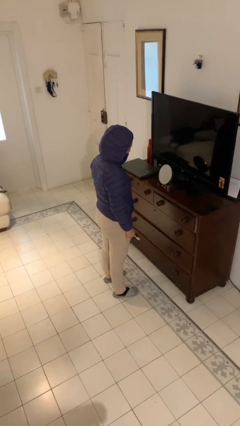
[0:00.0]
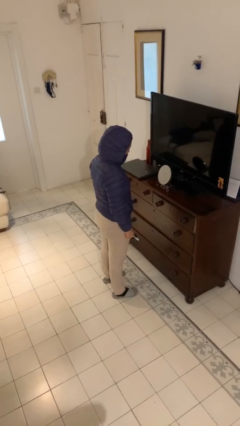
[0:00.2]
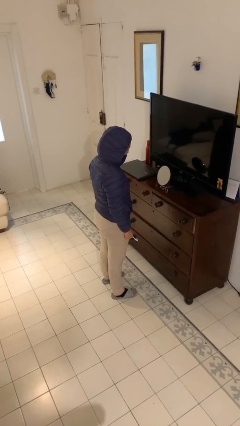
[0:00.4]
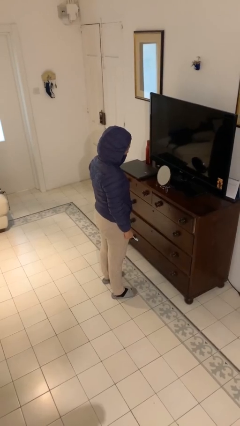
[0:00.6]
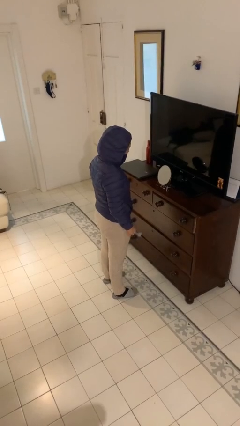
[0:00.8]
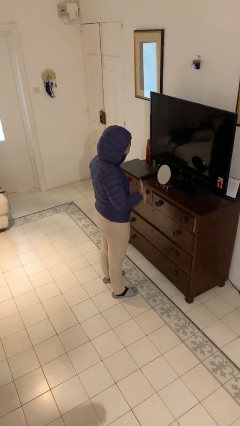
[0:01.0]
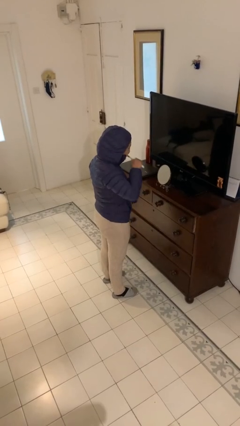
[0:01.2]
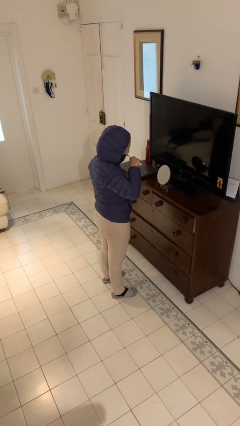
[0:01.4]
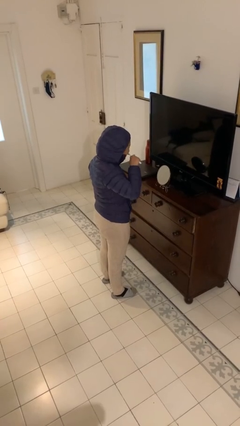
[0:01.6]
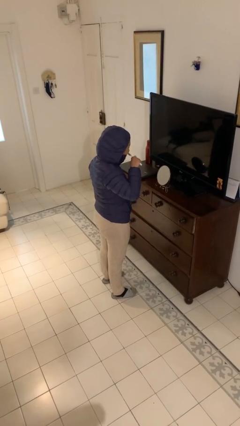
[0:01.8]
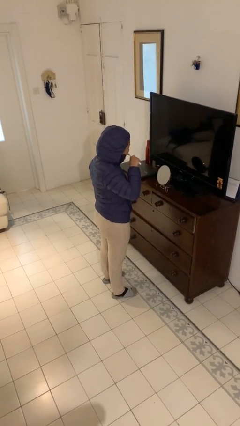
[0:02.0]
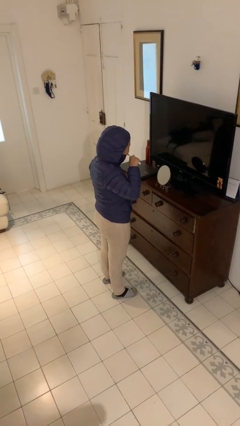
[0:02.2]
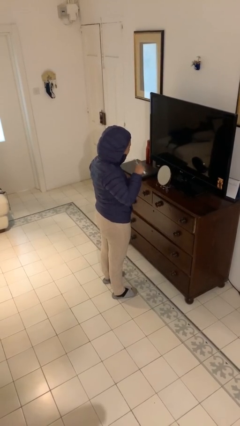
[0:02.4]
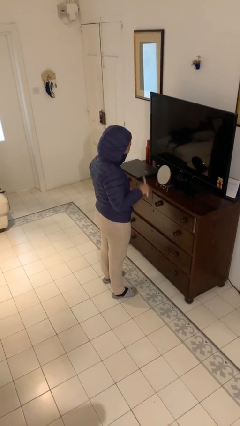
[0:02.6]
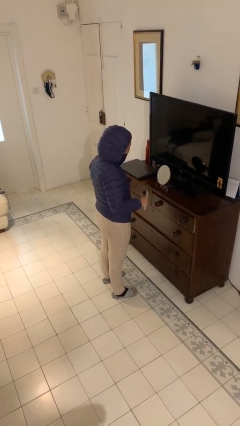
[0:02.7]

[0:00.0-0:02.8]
person brushes teeth

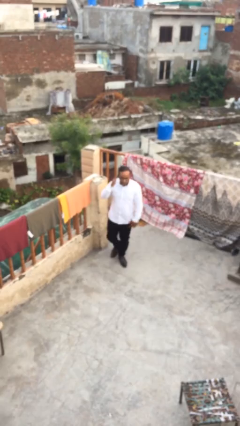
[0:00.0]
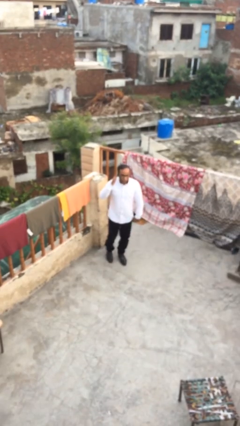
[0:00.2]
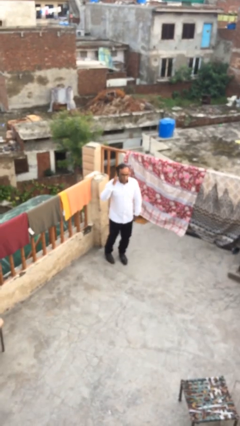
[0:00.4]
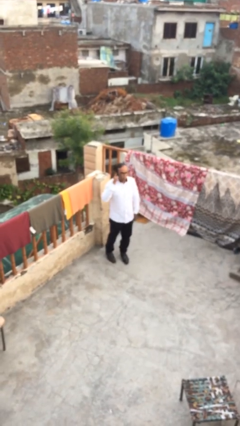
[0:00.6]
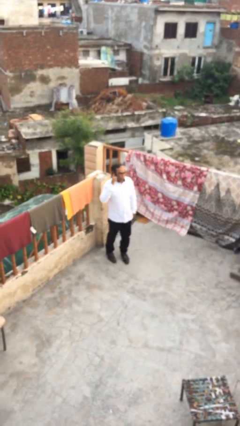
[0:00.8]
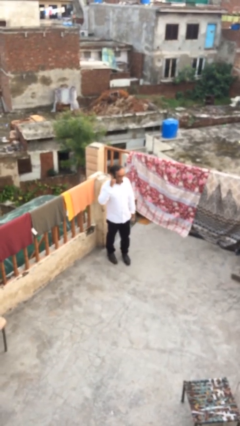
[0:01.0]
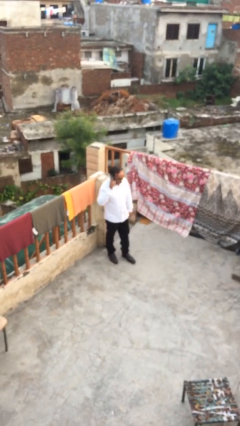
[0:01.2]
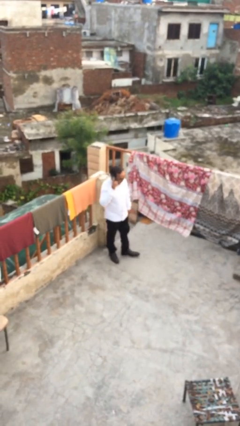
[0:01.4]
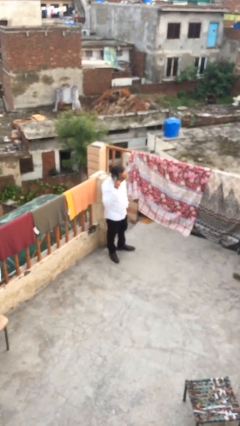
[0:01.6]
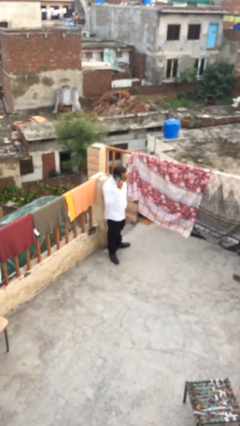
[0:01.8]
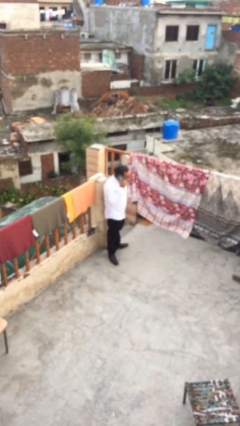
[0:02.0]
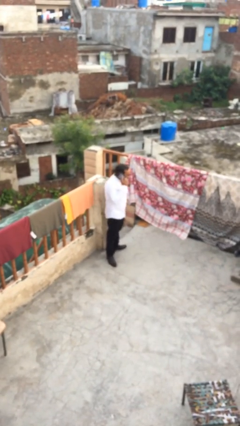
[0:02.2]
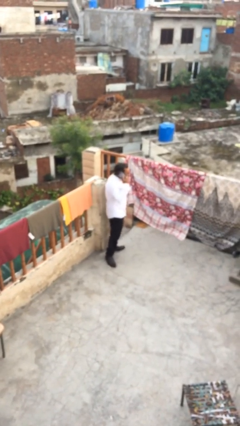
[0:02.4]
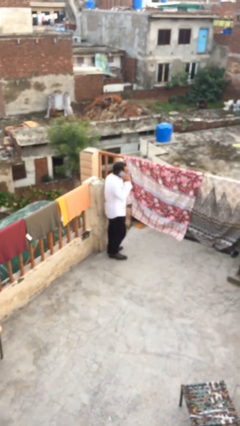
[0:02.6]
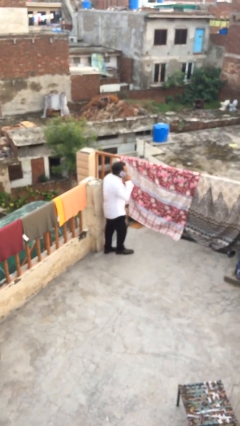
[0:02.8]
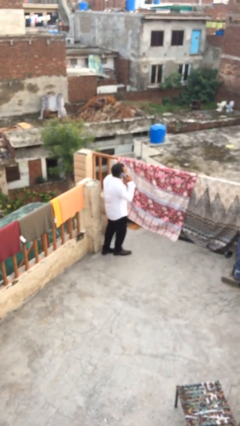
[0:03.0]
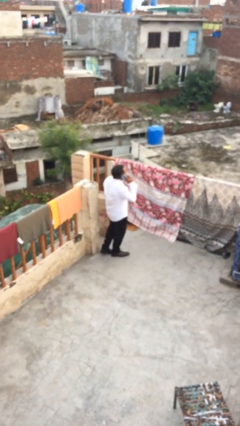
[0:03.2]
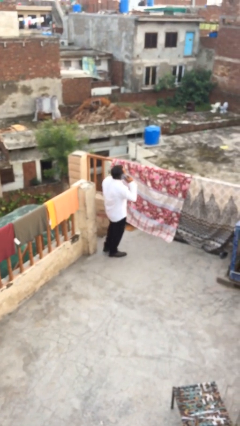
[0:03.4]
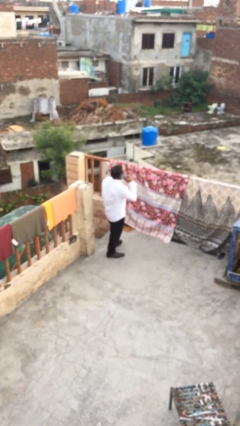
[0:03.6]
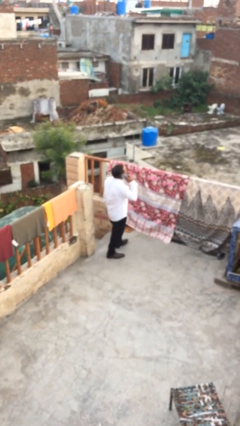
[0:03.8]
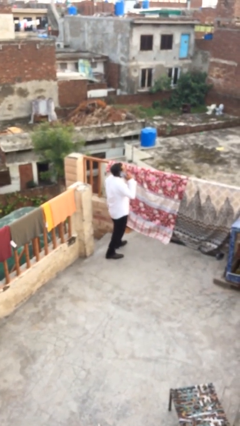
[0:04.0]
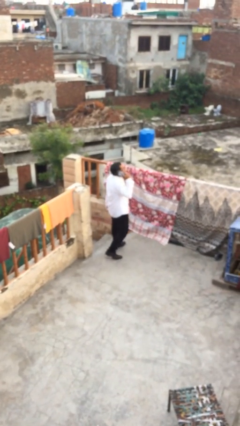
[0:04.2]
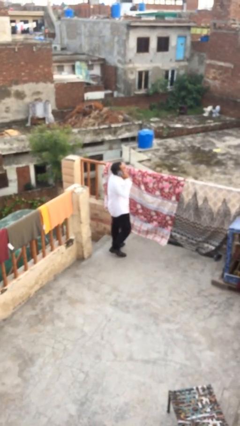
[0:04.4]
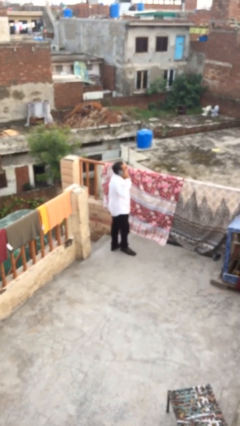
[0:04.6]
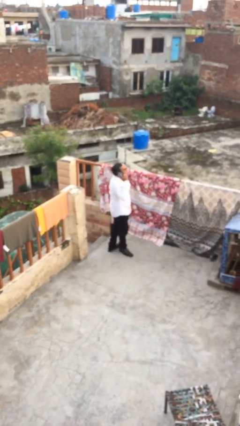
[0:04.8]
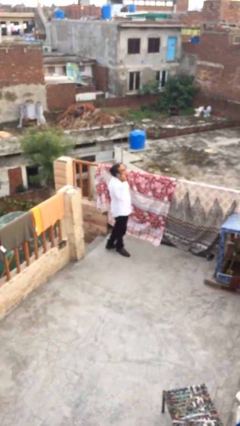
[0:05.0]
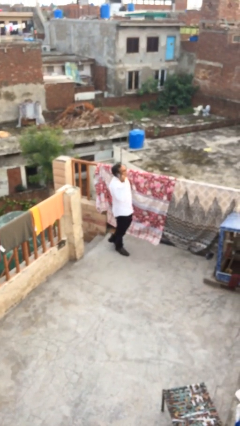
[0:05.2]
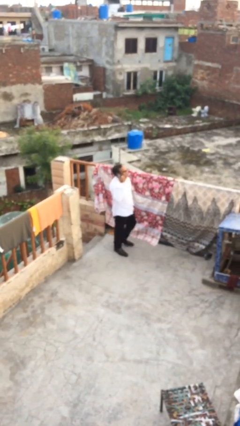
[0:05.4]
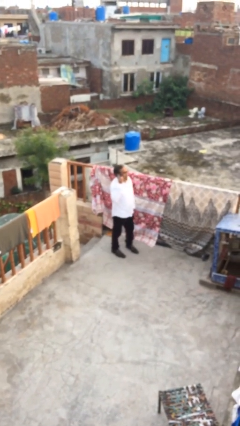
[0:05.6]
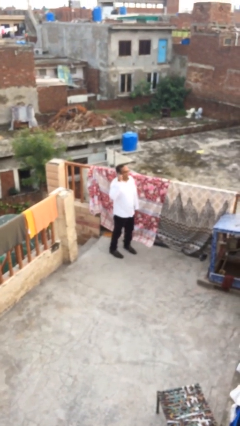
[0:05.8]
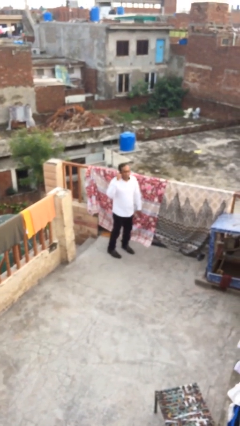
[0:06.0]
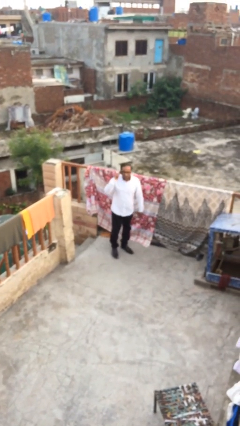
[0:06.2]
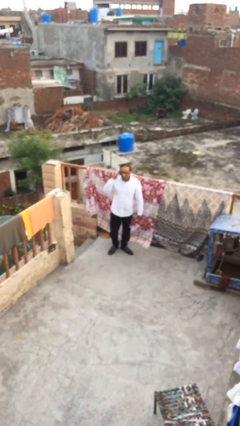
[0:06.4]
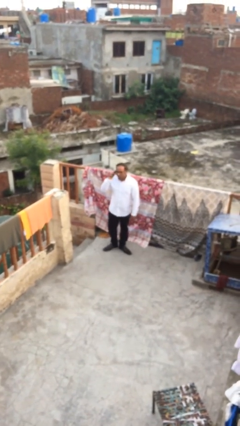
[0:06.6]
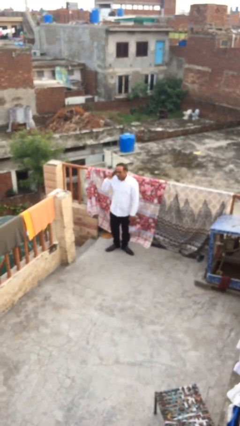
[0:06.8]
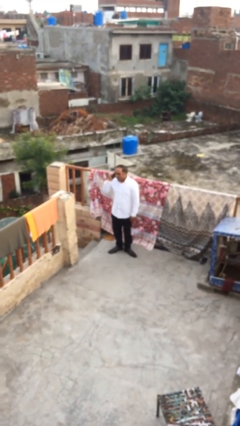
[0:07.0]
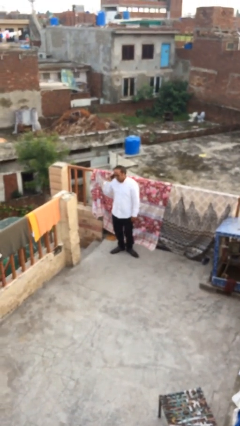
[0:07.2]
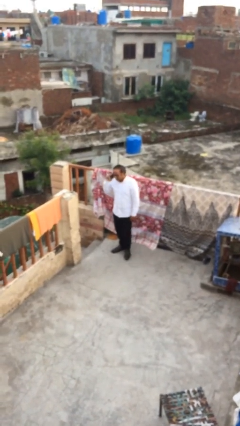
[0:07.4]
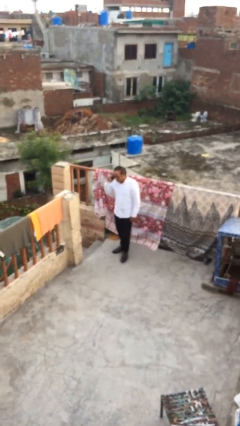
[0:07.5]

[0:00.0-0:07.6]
person talks on phone

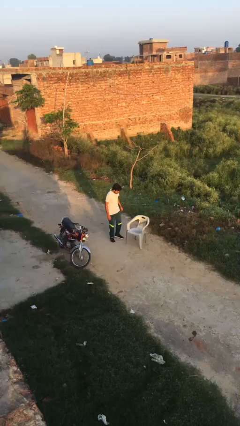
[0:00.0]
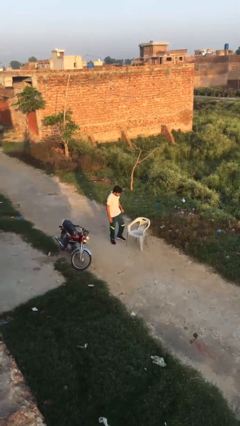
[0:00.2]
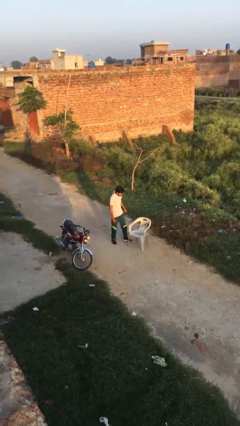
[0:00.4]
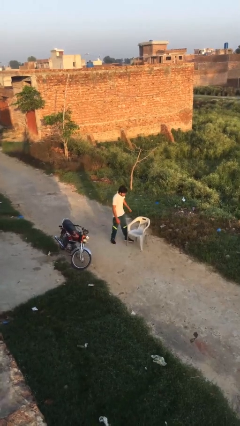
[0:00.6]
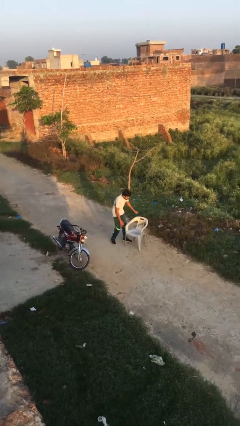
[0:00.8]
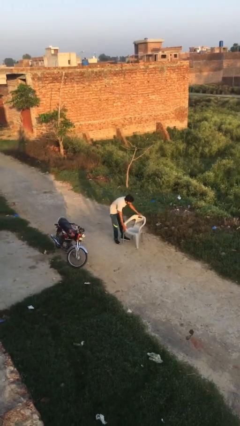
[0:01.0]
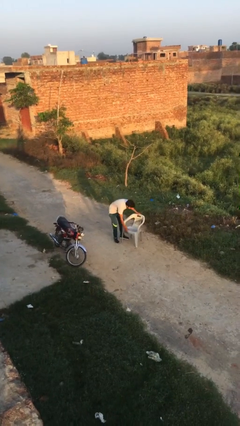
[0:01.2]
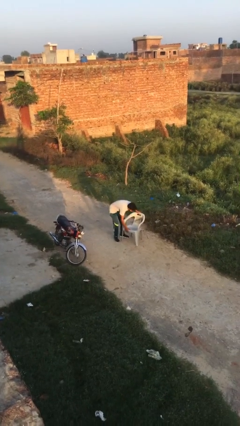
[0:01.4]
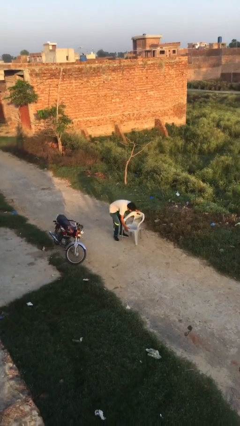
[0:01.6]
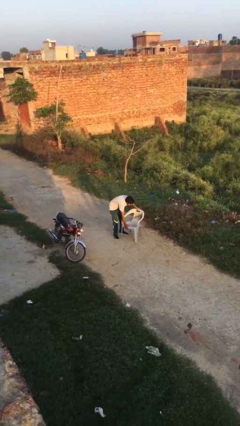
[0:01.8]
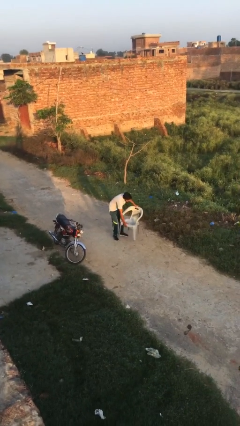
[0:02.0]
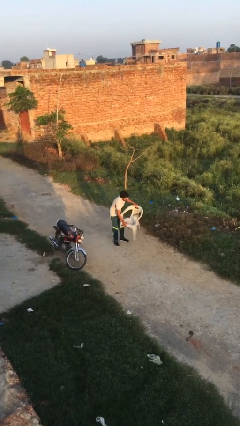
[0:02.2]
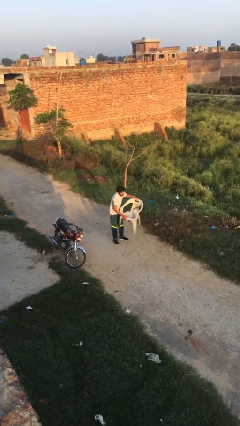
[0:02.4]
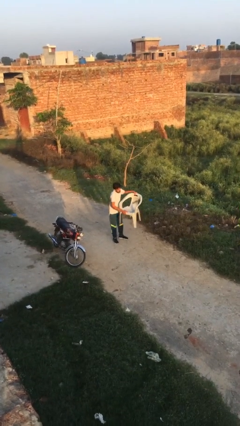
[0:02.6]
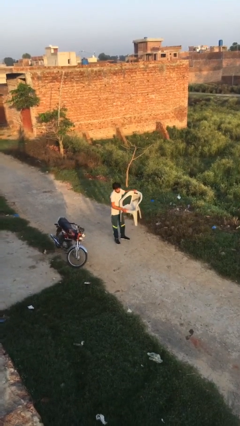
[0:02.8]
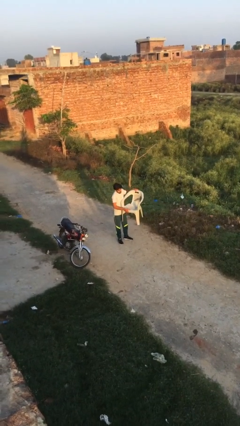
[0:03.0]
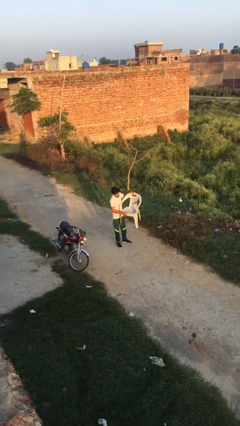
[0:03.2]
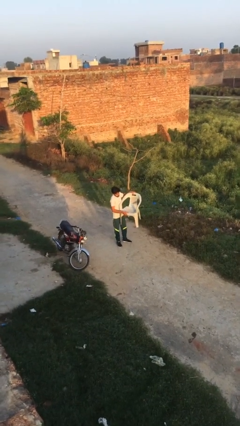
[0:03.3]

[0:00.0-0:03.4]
person picks up object from floor

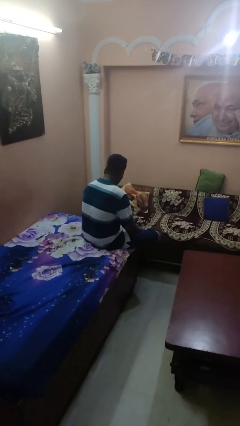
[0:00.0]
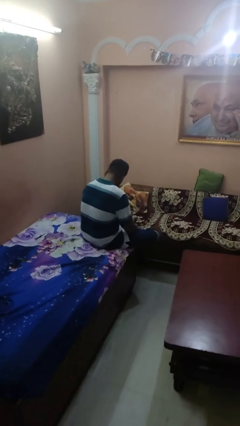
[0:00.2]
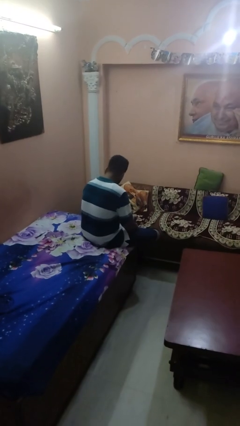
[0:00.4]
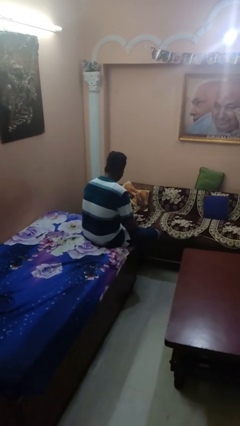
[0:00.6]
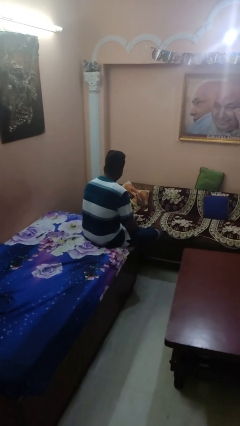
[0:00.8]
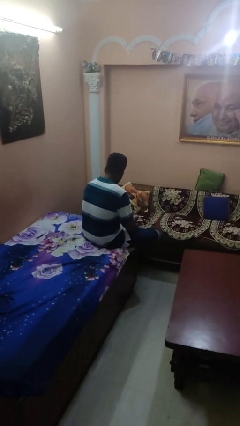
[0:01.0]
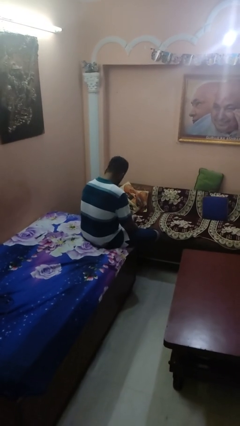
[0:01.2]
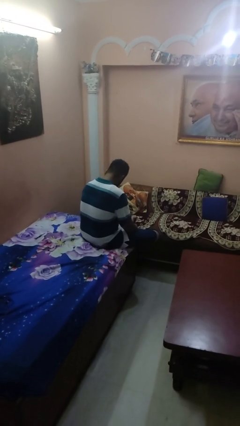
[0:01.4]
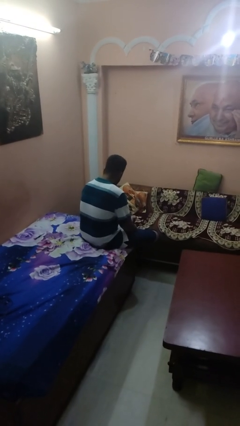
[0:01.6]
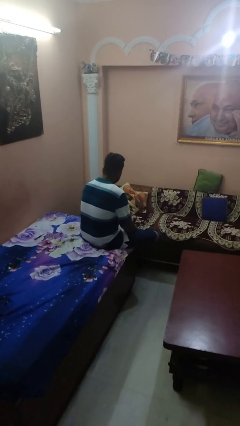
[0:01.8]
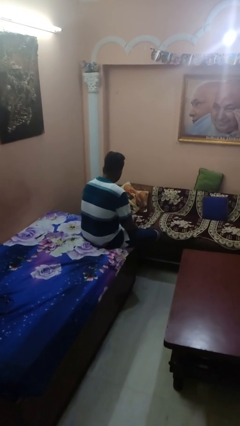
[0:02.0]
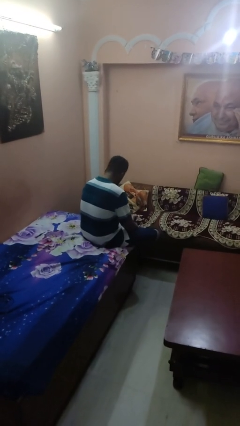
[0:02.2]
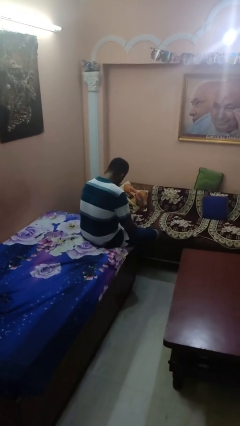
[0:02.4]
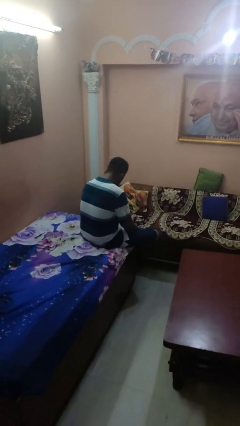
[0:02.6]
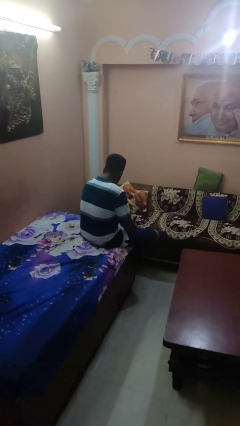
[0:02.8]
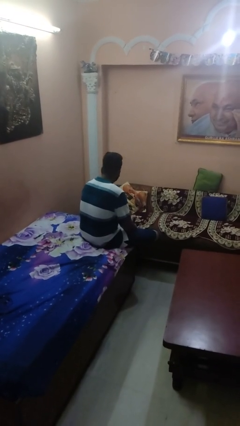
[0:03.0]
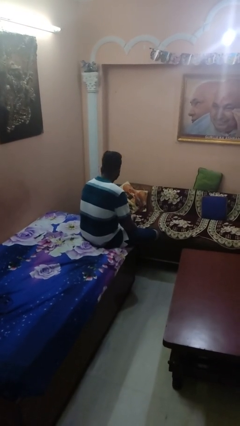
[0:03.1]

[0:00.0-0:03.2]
person nods head

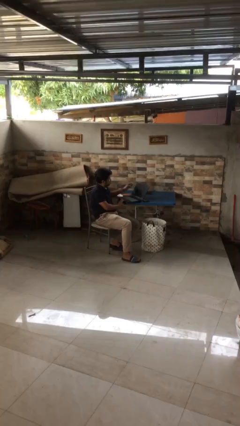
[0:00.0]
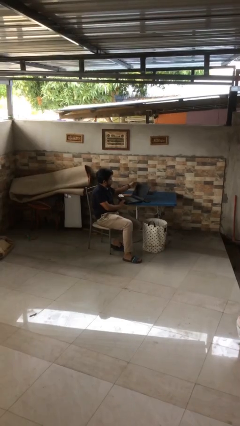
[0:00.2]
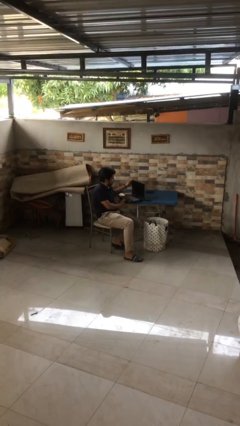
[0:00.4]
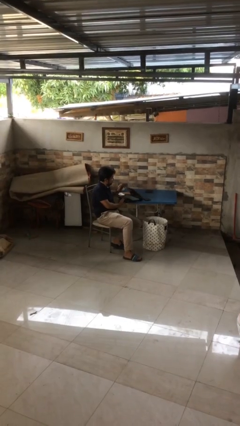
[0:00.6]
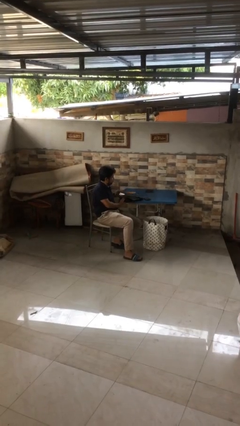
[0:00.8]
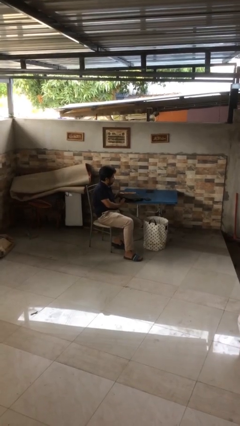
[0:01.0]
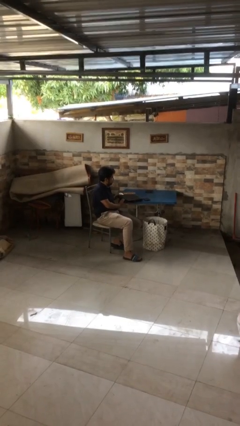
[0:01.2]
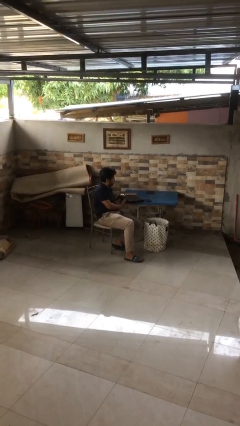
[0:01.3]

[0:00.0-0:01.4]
person closes laptop
